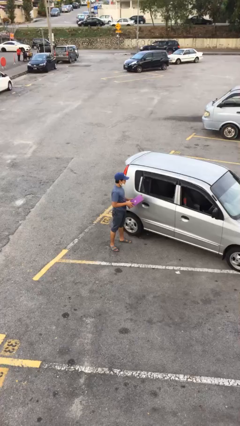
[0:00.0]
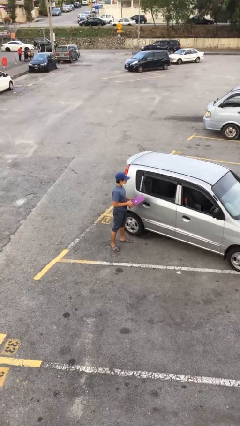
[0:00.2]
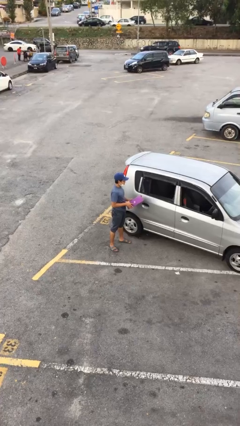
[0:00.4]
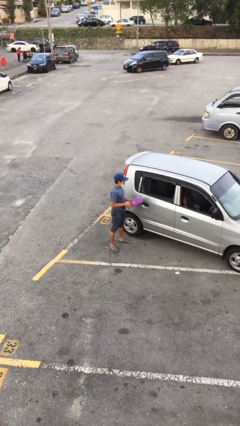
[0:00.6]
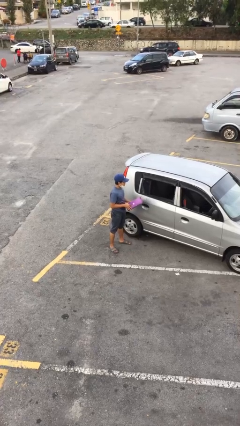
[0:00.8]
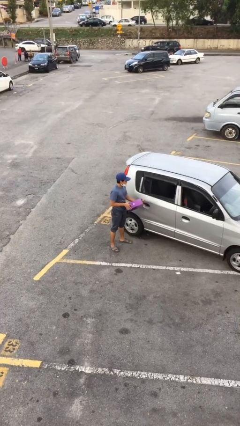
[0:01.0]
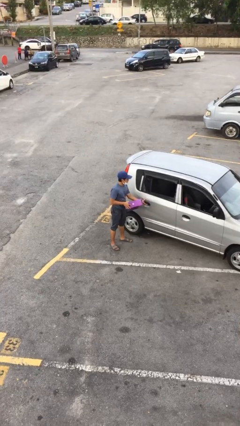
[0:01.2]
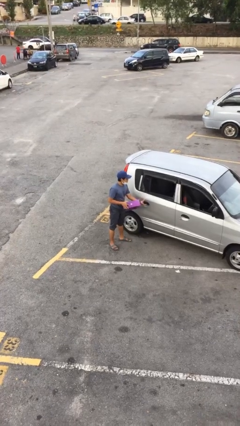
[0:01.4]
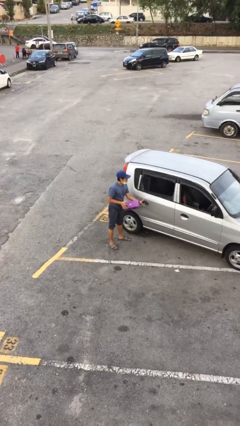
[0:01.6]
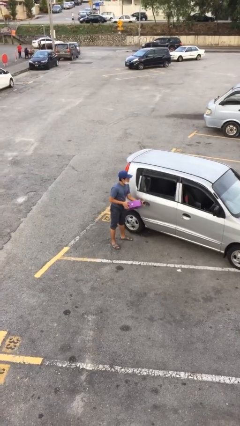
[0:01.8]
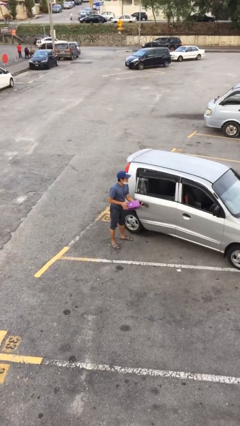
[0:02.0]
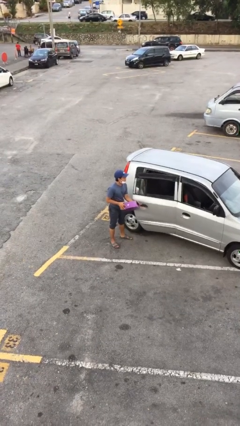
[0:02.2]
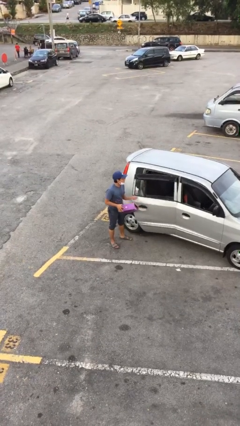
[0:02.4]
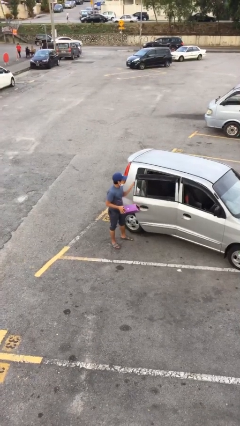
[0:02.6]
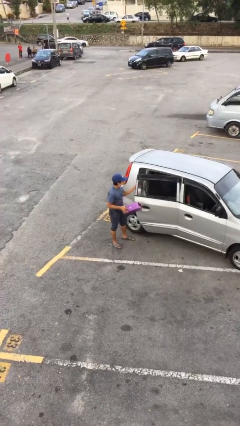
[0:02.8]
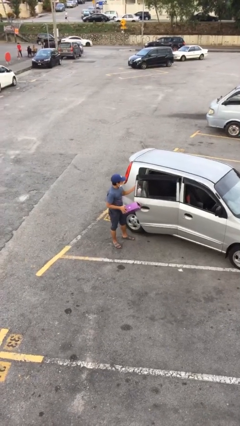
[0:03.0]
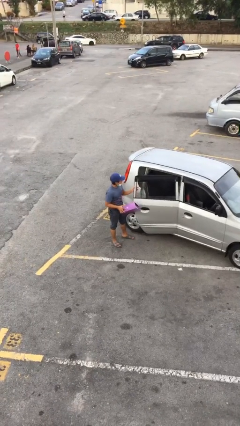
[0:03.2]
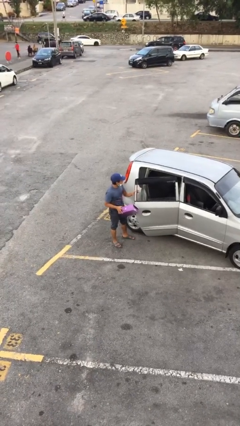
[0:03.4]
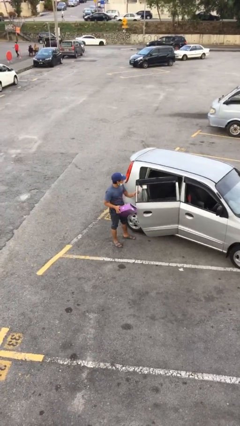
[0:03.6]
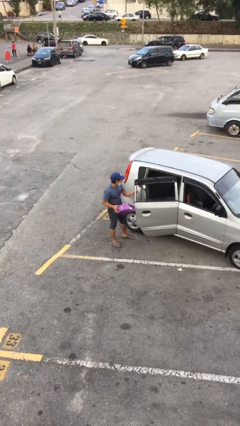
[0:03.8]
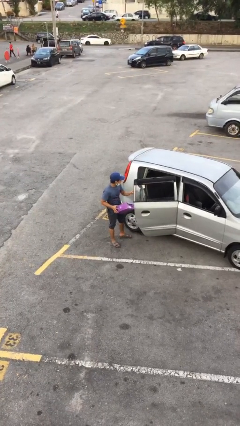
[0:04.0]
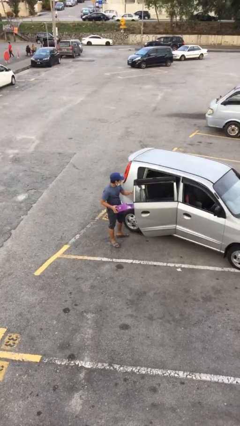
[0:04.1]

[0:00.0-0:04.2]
person opens car door

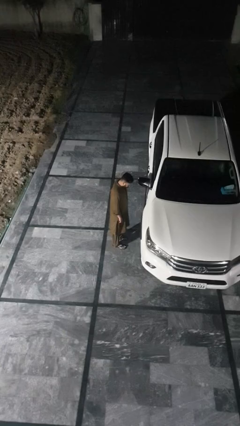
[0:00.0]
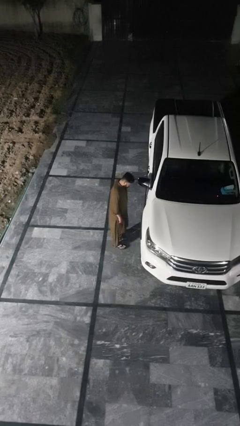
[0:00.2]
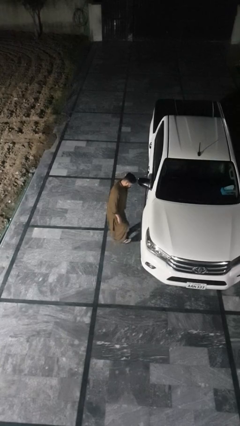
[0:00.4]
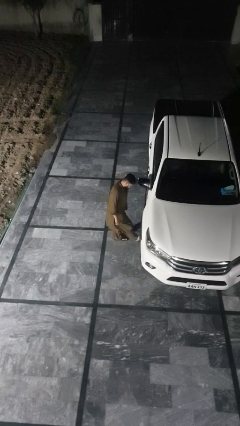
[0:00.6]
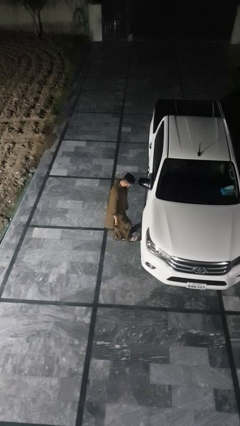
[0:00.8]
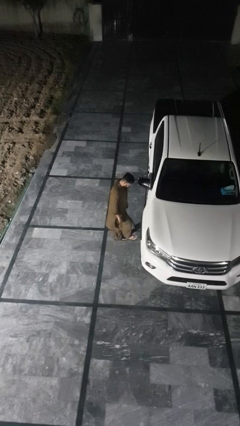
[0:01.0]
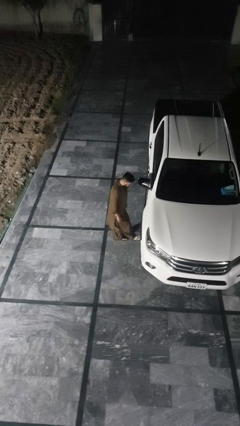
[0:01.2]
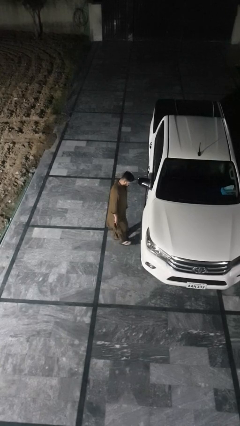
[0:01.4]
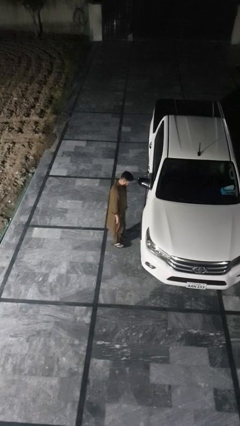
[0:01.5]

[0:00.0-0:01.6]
person kicks car tires

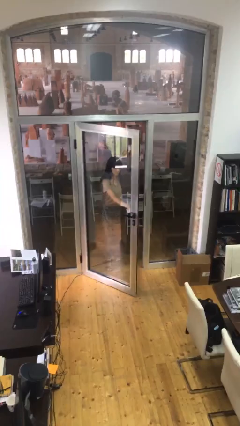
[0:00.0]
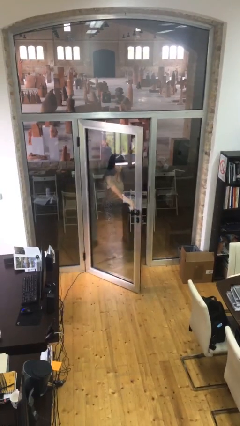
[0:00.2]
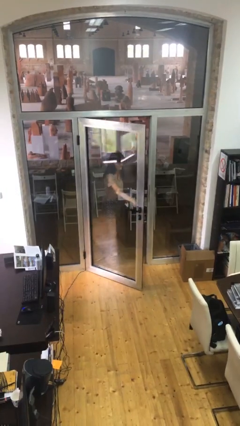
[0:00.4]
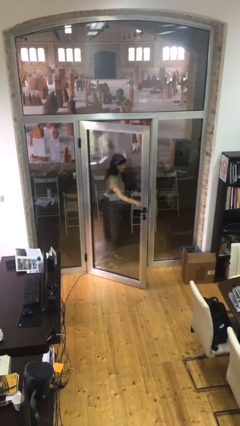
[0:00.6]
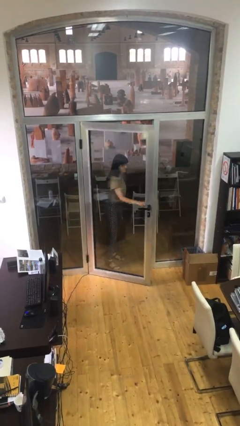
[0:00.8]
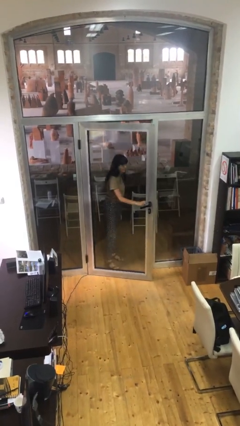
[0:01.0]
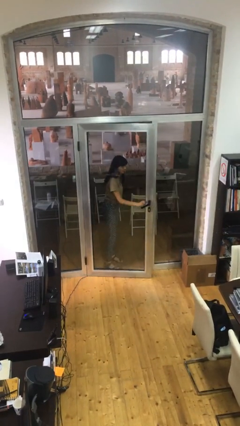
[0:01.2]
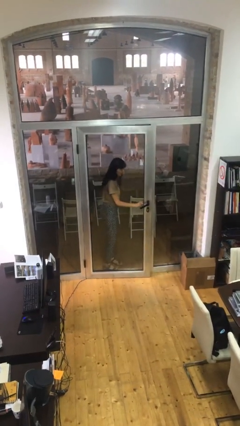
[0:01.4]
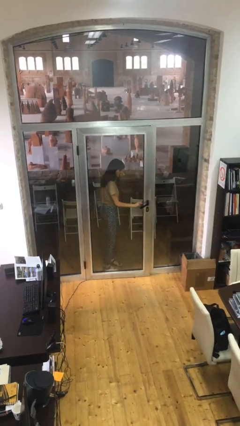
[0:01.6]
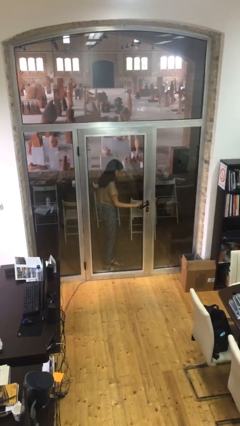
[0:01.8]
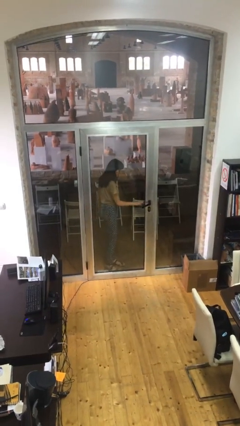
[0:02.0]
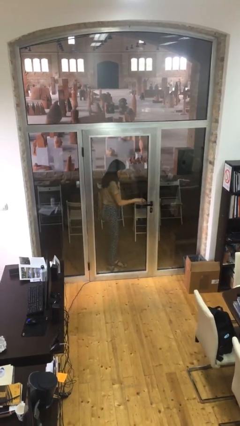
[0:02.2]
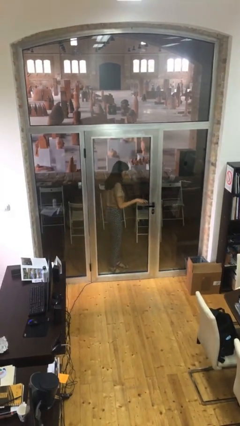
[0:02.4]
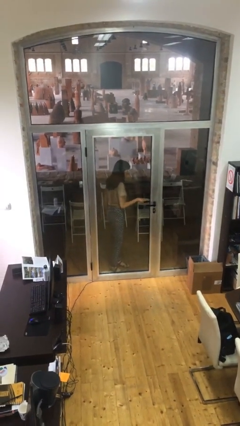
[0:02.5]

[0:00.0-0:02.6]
person closes facility door

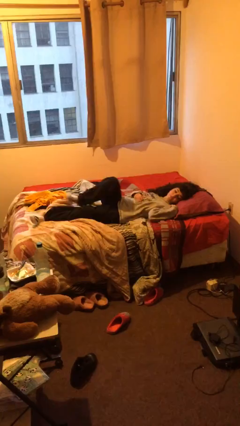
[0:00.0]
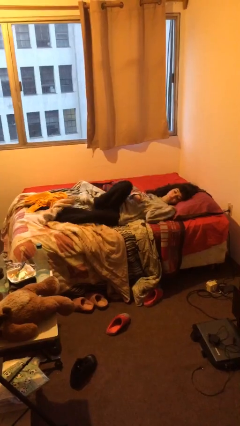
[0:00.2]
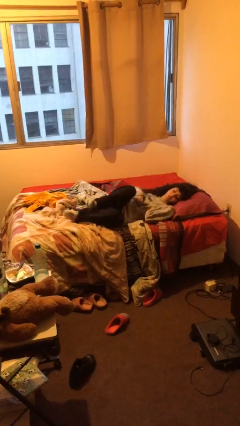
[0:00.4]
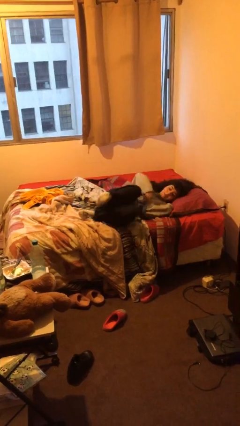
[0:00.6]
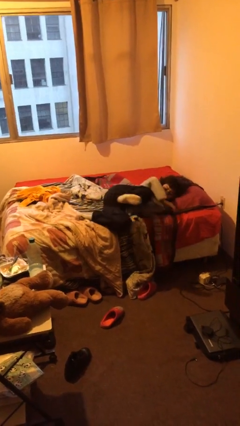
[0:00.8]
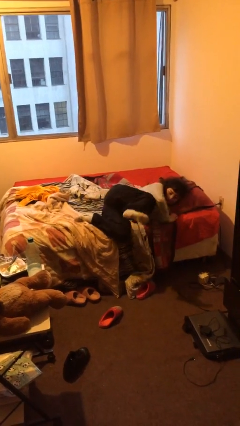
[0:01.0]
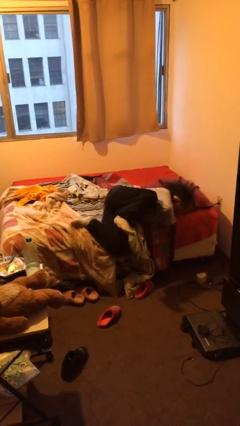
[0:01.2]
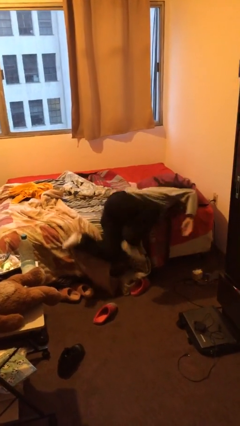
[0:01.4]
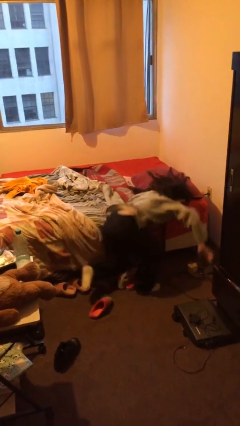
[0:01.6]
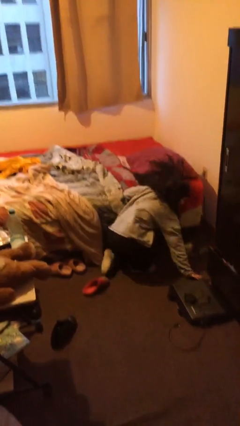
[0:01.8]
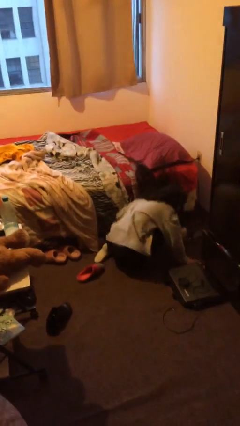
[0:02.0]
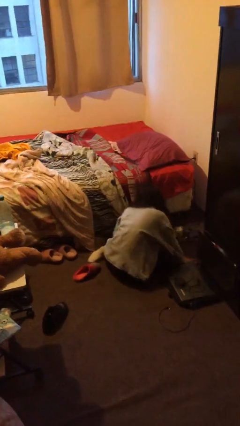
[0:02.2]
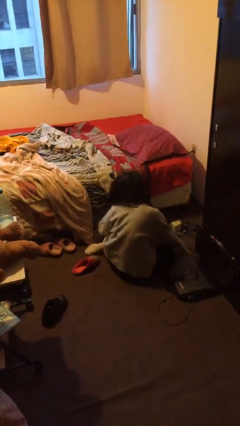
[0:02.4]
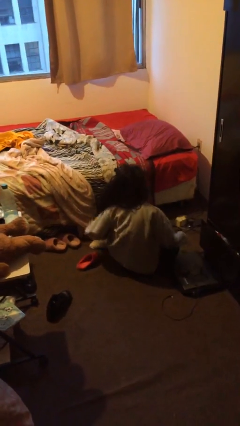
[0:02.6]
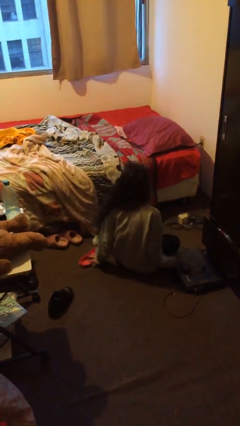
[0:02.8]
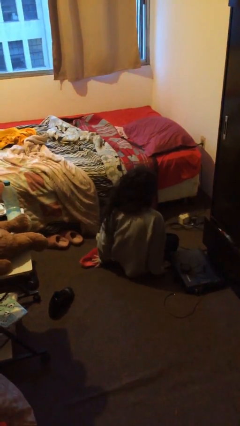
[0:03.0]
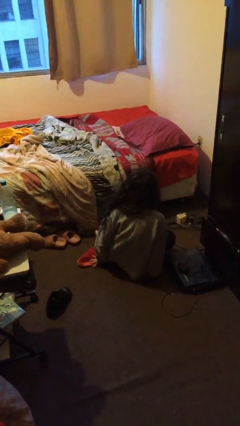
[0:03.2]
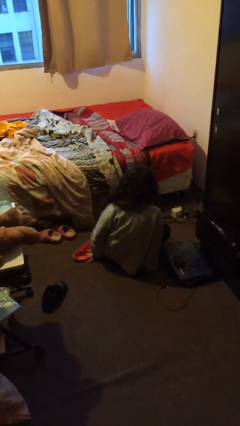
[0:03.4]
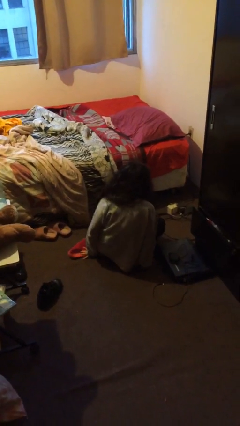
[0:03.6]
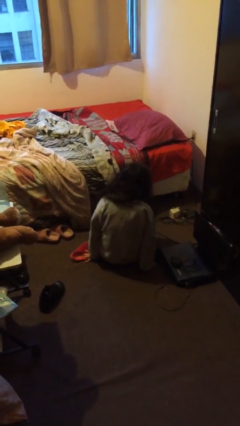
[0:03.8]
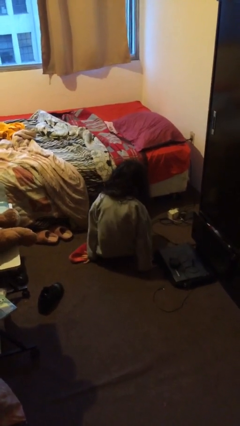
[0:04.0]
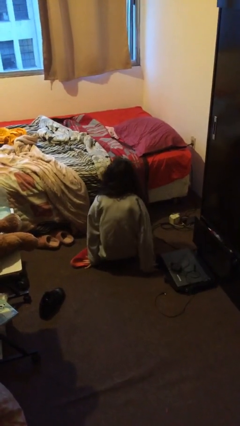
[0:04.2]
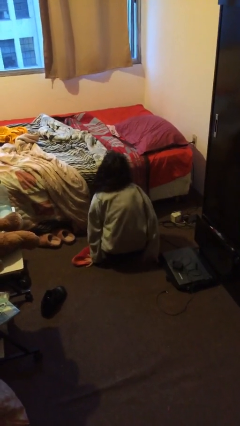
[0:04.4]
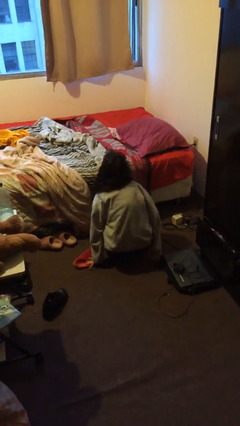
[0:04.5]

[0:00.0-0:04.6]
person falls from bed

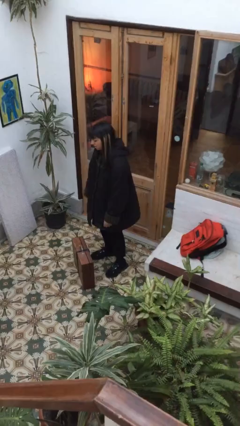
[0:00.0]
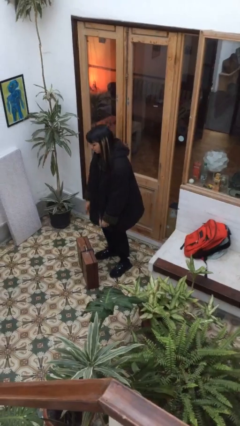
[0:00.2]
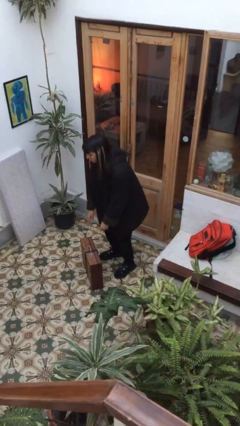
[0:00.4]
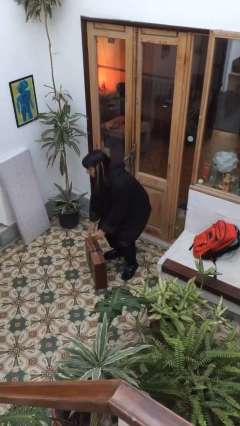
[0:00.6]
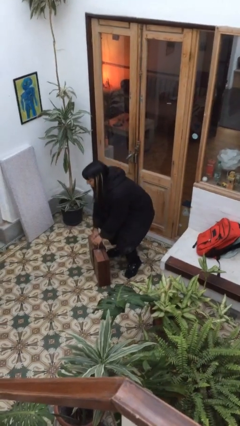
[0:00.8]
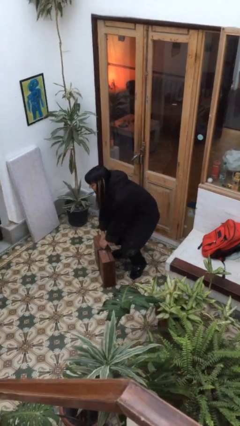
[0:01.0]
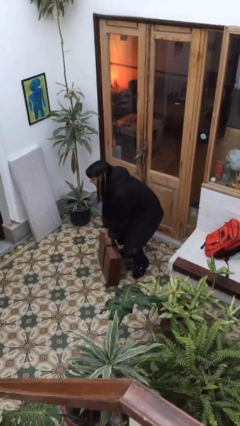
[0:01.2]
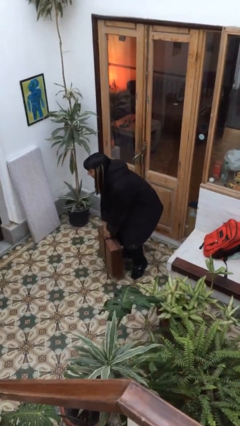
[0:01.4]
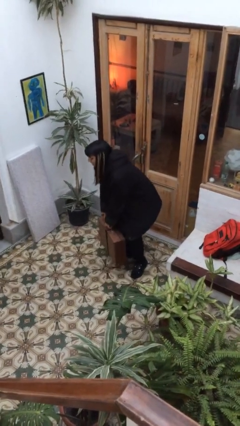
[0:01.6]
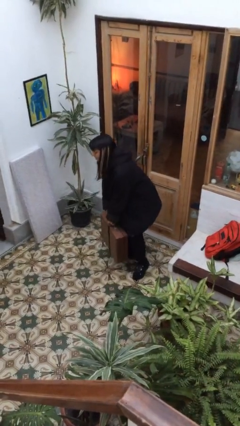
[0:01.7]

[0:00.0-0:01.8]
person picks up object from floor

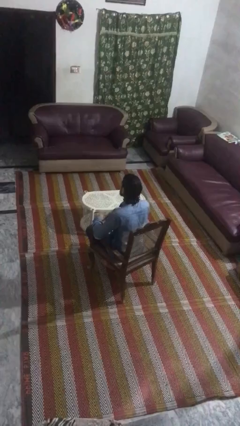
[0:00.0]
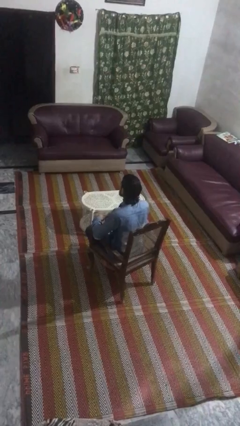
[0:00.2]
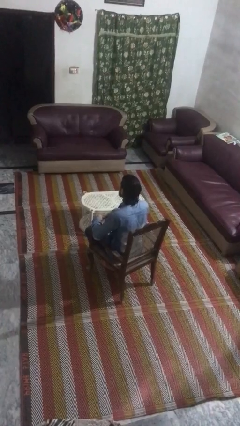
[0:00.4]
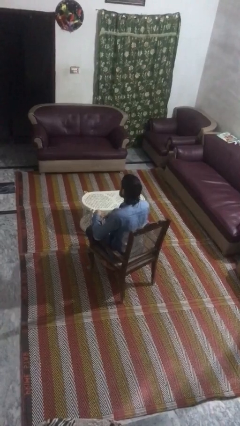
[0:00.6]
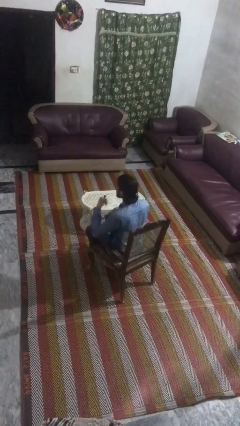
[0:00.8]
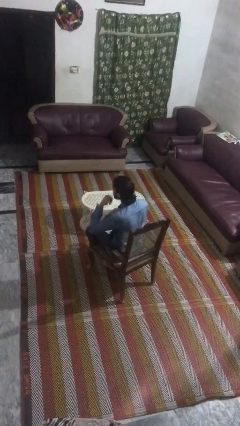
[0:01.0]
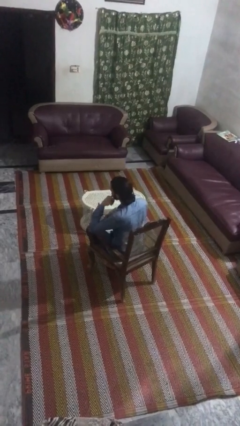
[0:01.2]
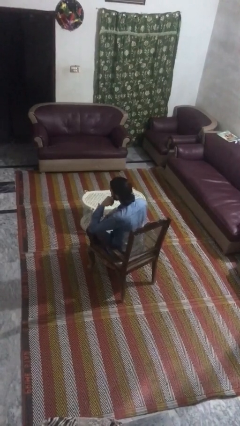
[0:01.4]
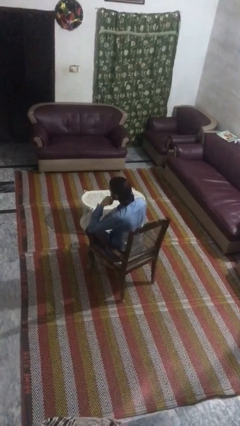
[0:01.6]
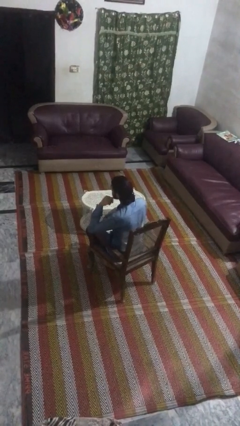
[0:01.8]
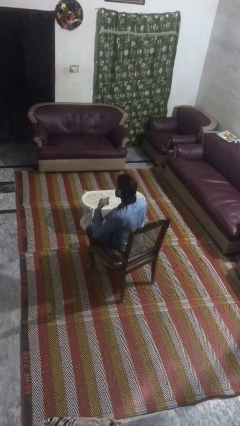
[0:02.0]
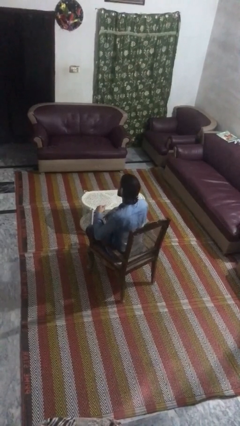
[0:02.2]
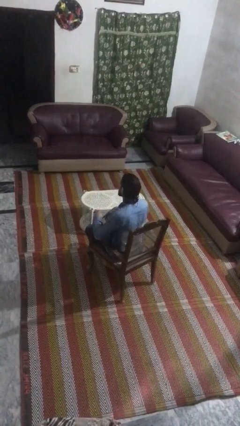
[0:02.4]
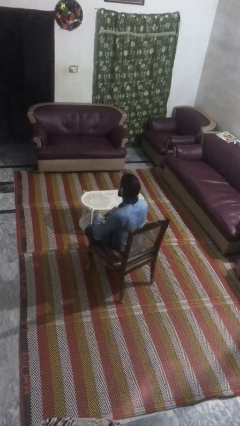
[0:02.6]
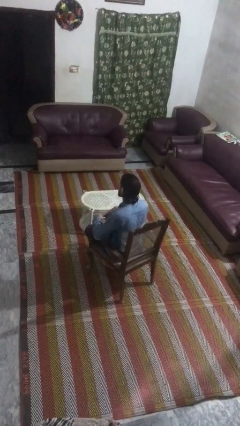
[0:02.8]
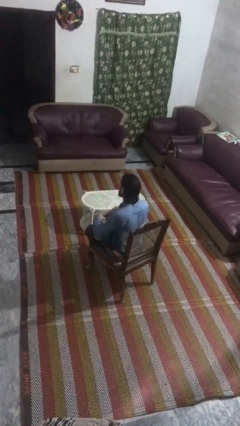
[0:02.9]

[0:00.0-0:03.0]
person gestures call me
